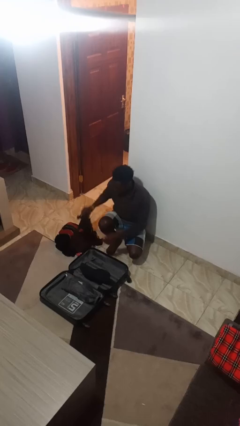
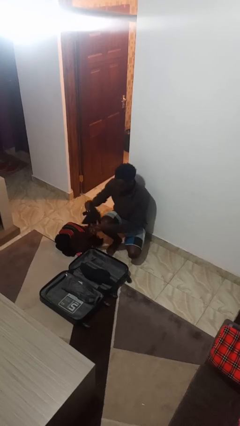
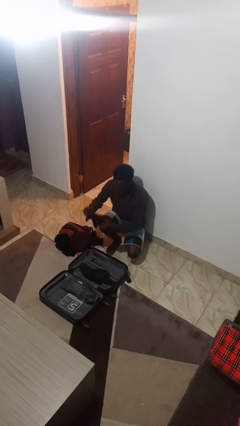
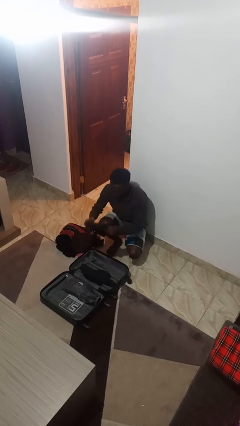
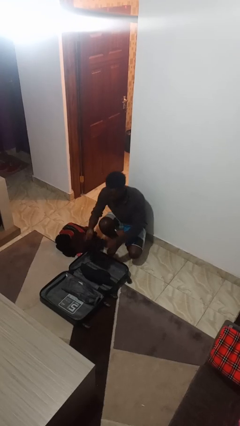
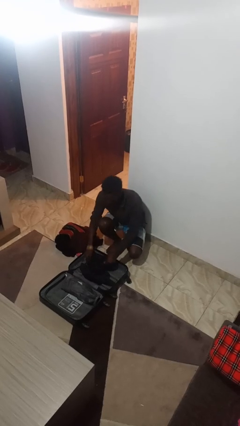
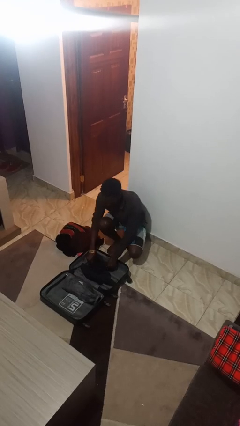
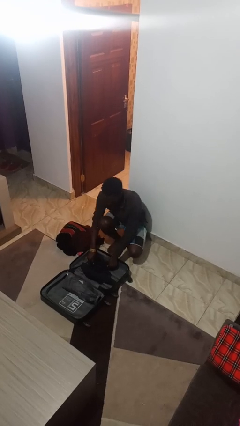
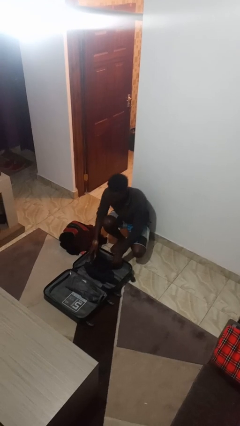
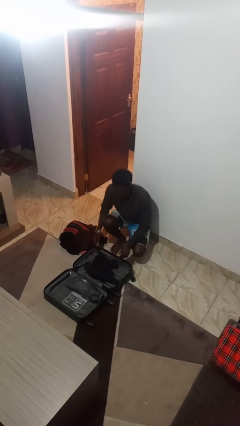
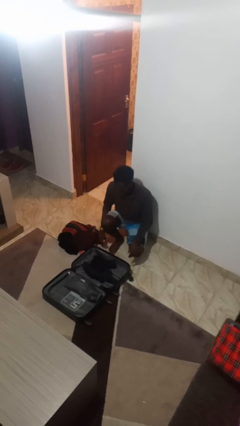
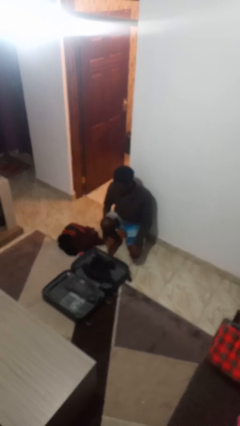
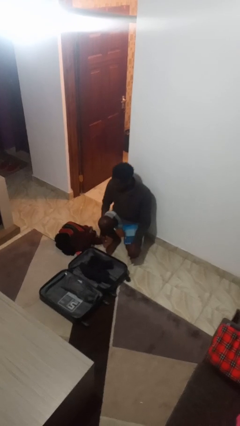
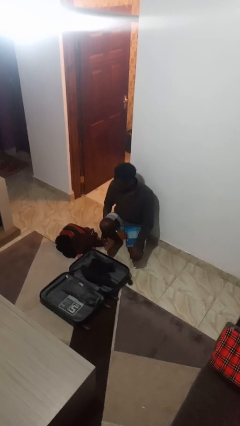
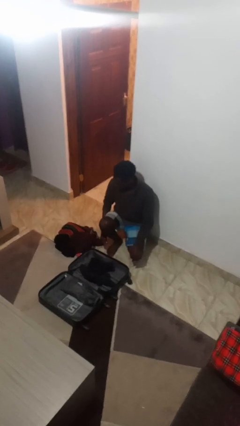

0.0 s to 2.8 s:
person loads clothes into suitcase

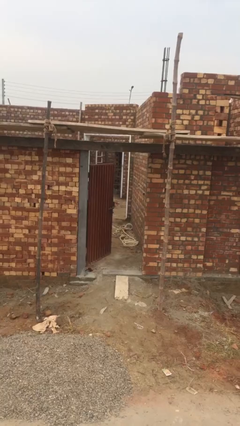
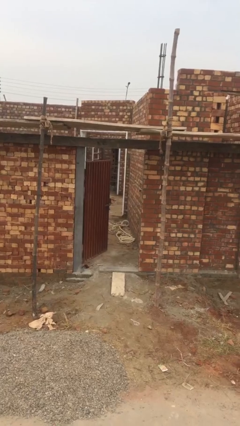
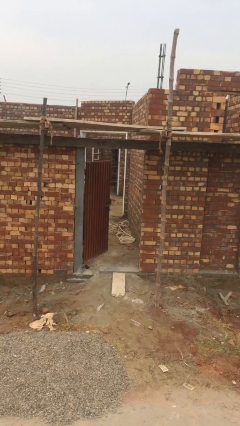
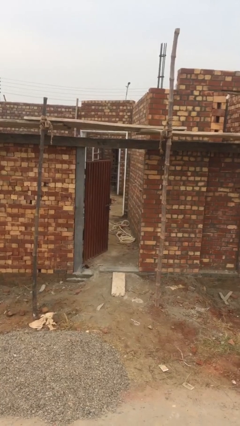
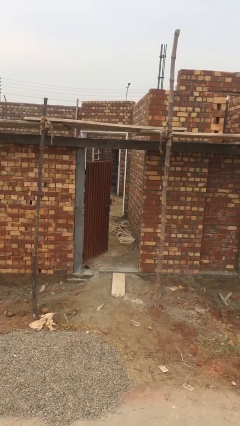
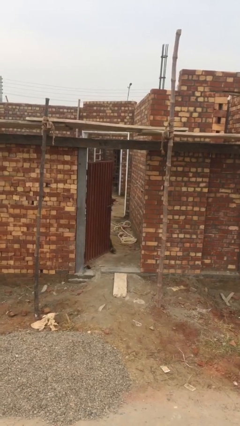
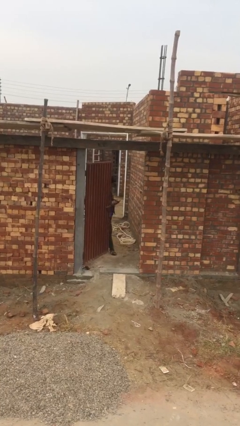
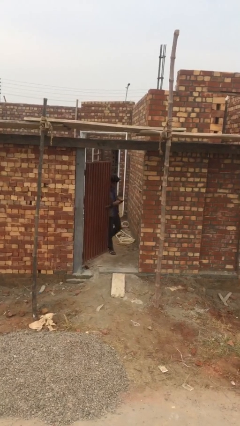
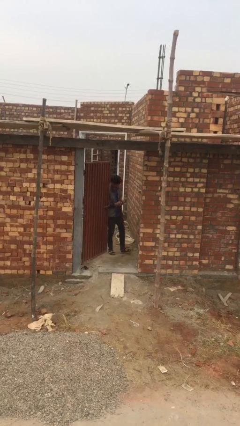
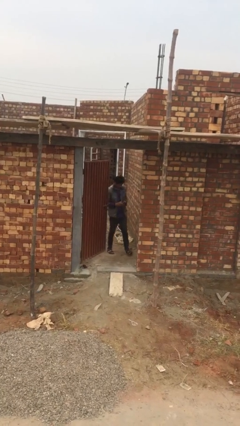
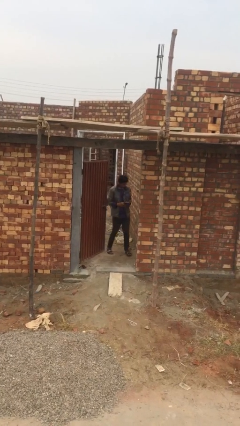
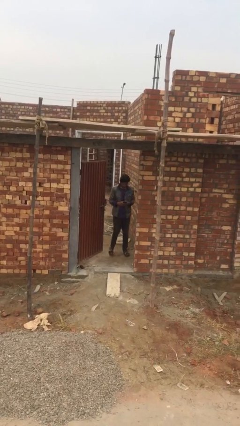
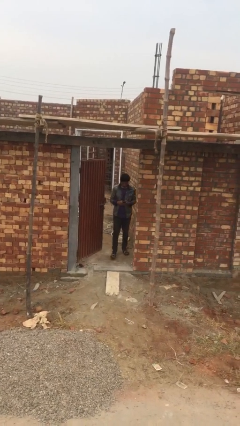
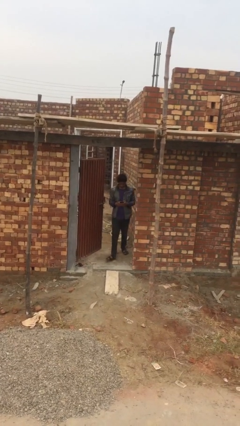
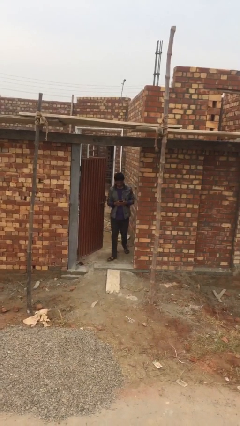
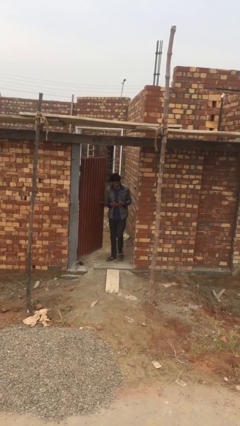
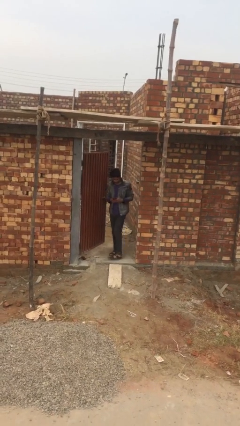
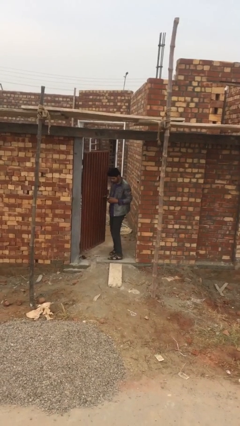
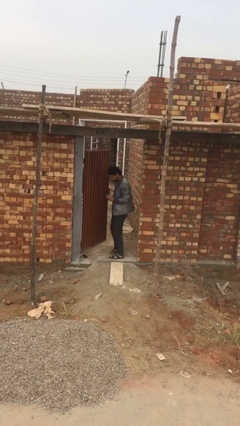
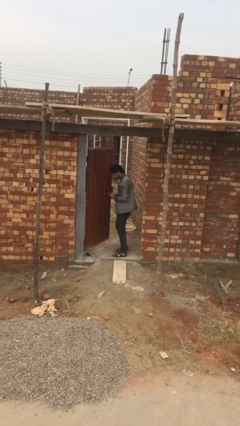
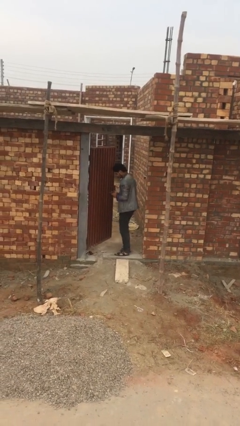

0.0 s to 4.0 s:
person enters scene through structure

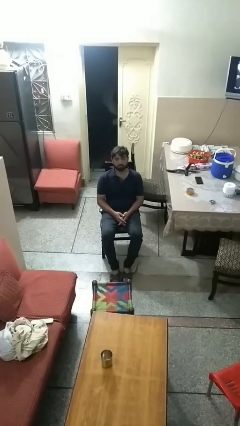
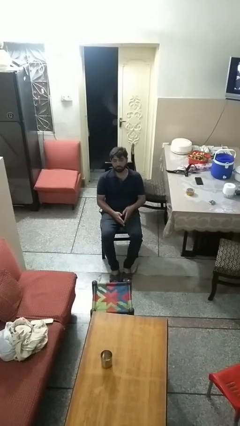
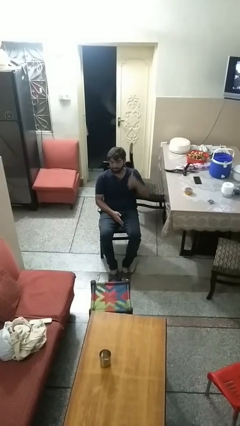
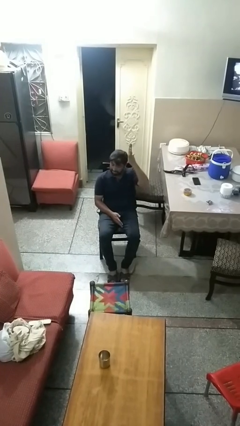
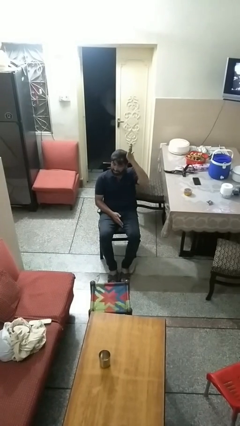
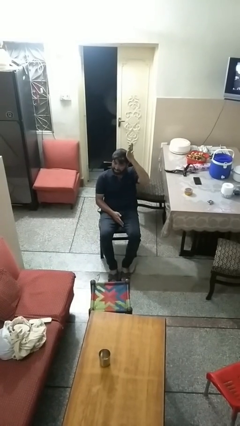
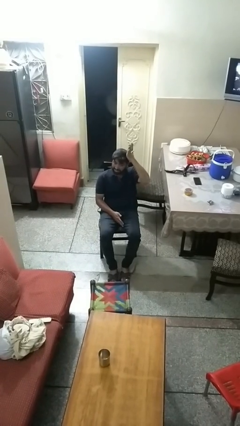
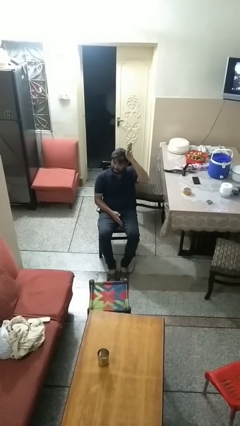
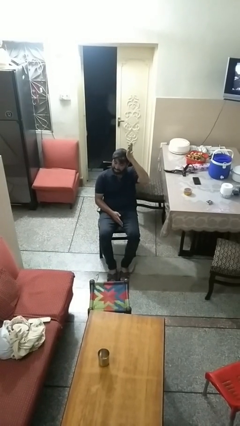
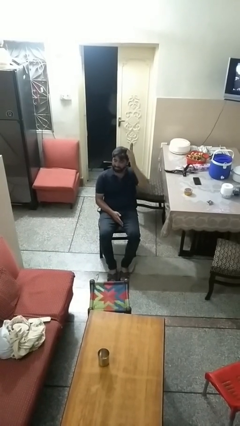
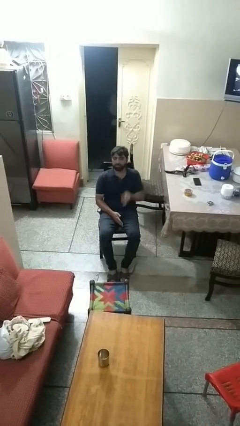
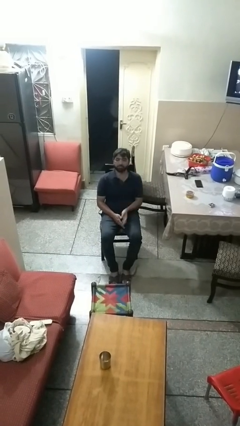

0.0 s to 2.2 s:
person pats head

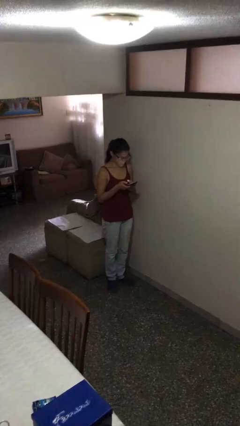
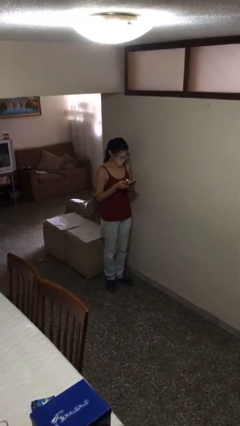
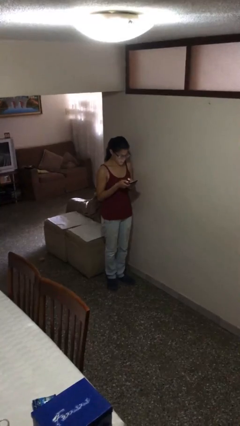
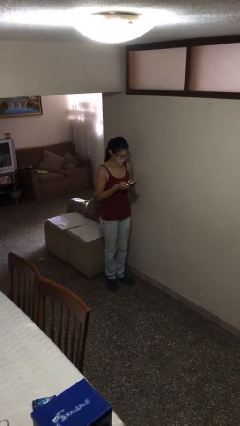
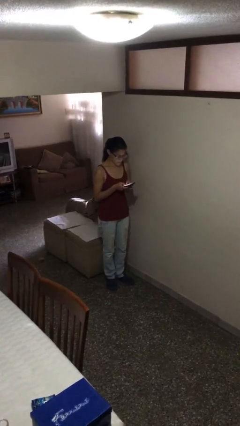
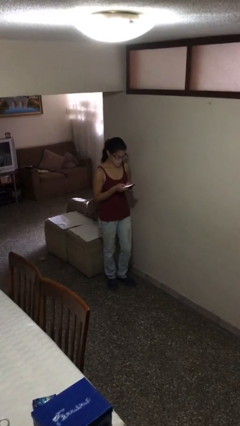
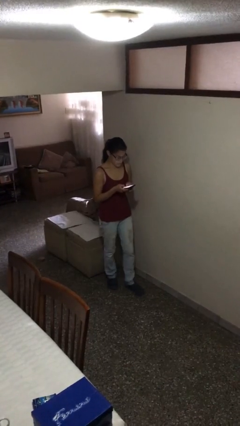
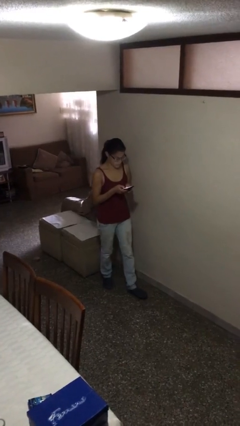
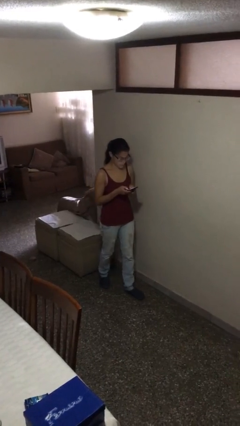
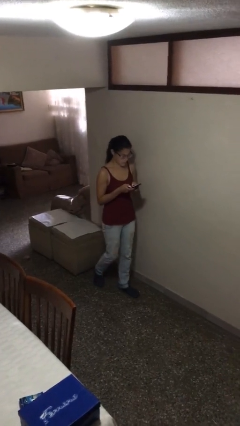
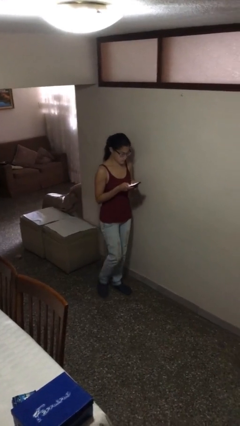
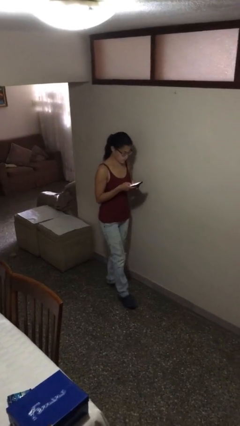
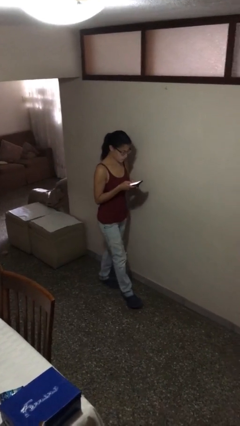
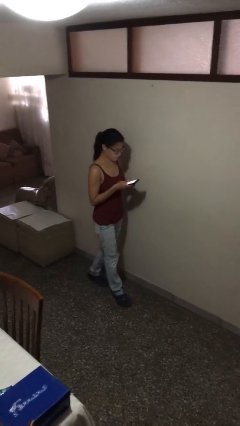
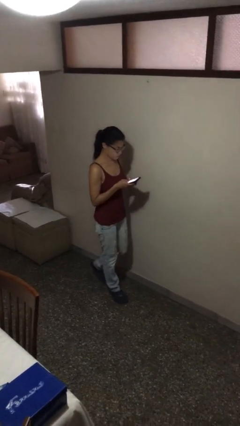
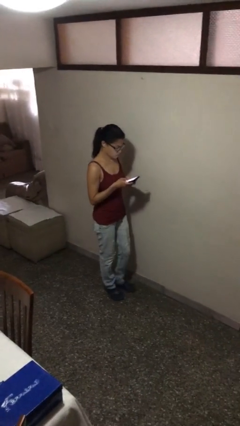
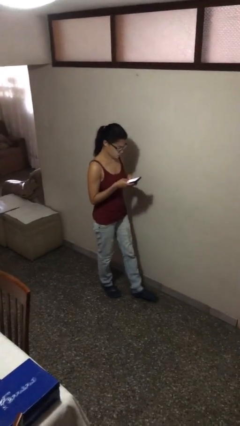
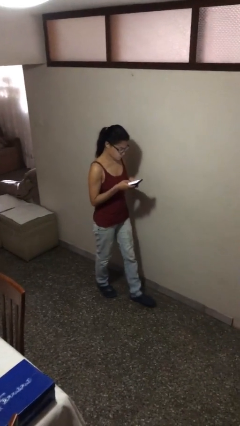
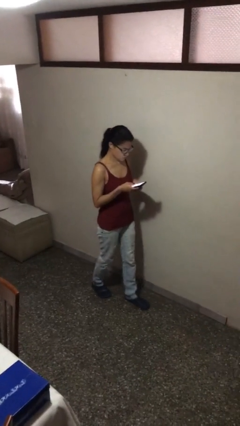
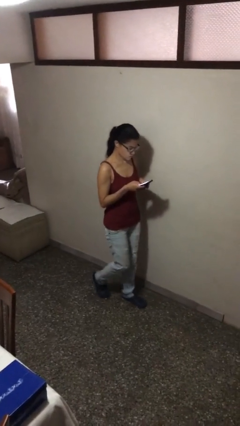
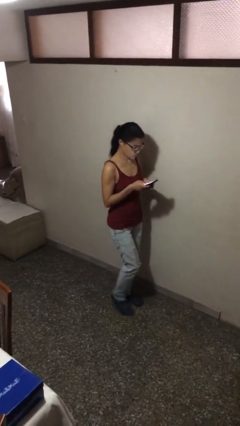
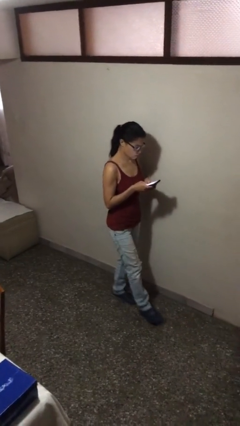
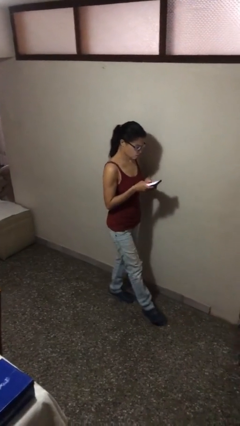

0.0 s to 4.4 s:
person texts on phone

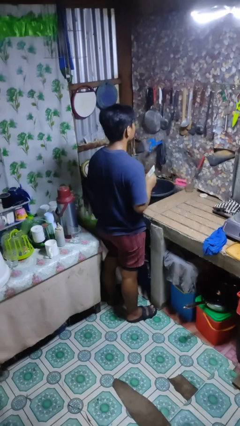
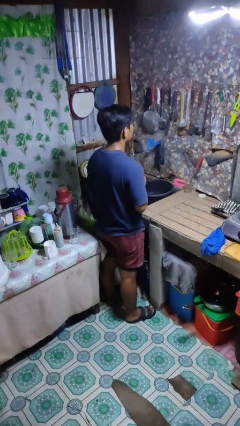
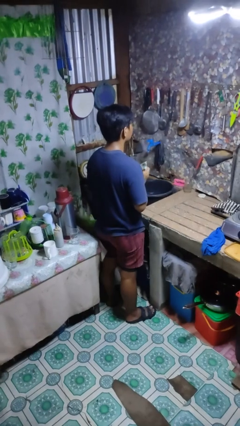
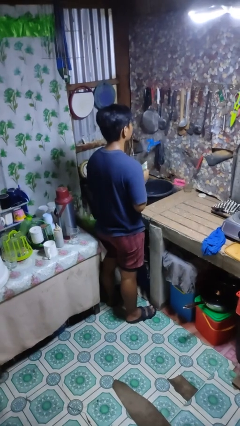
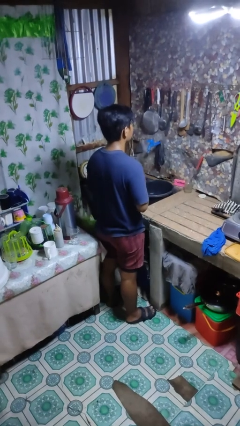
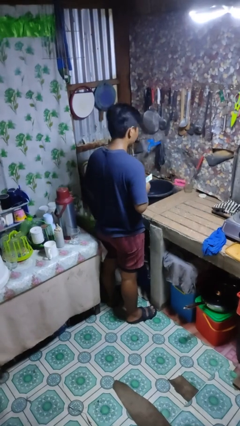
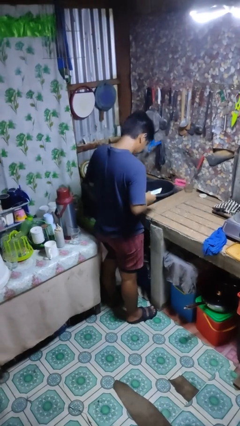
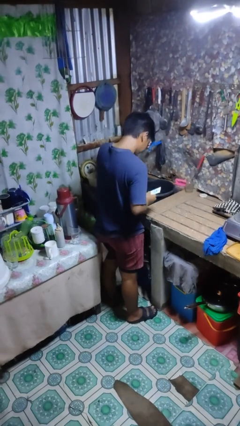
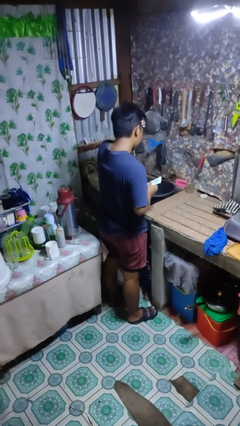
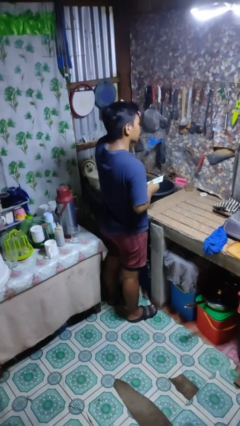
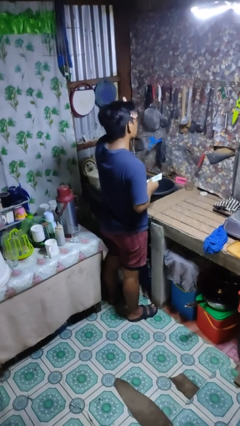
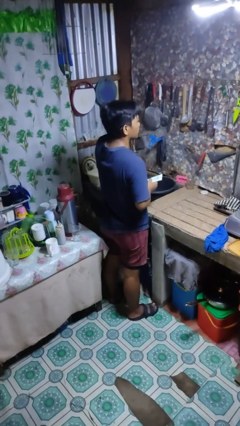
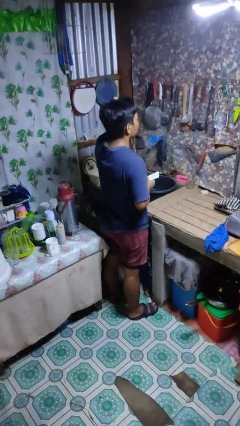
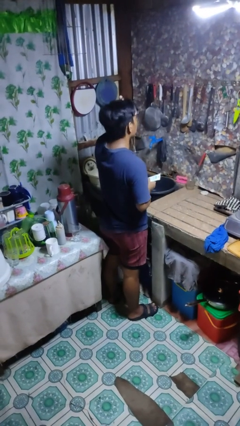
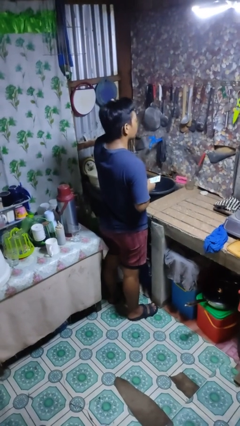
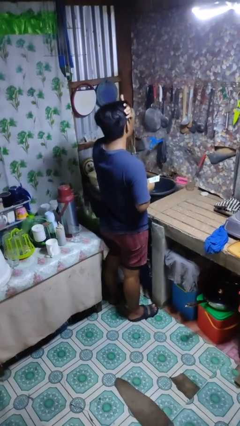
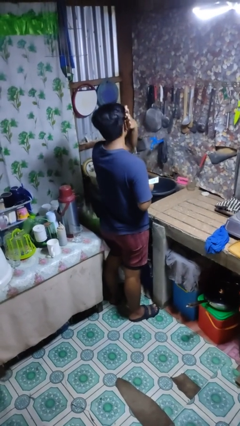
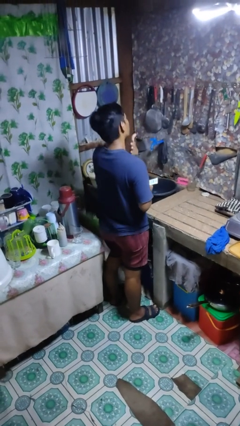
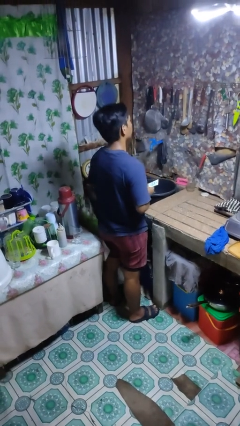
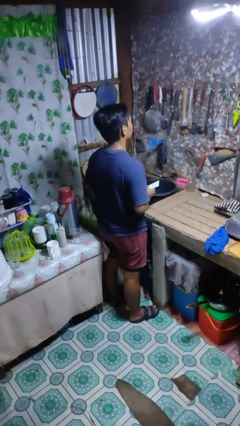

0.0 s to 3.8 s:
person applies facial moisturizer
